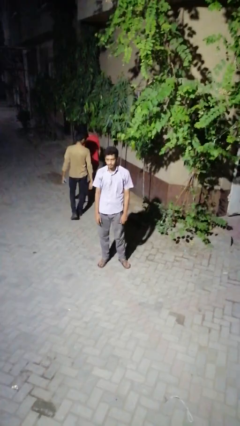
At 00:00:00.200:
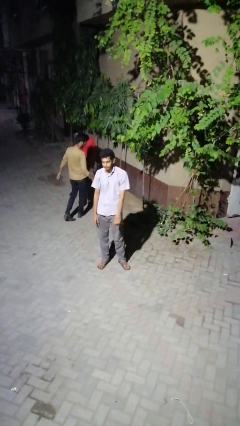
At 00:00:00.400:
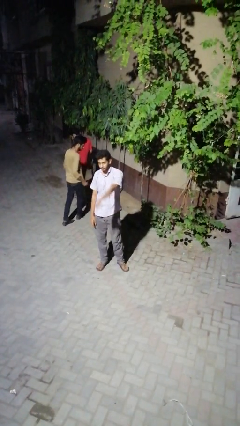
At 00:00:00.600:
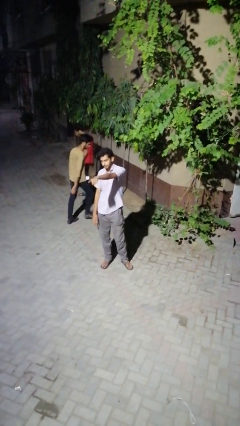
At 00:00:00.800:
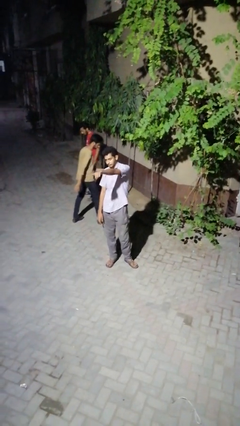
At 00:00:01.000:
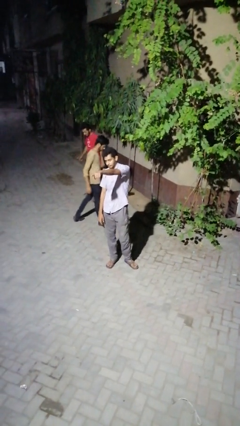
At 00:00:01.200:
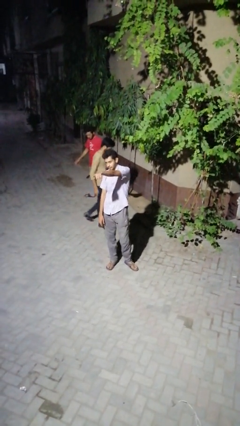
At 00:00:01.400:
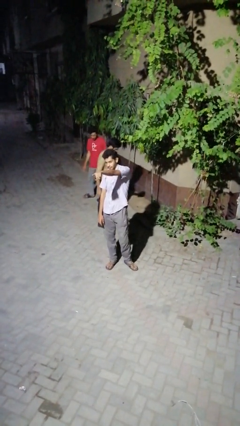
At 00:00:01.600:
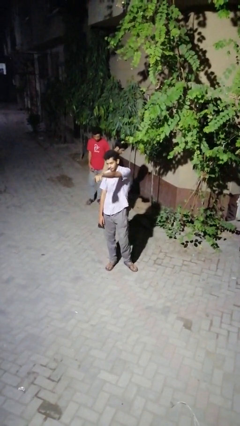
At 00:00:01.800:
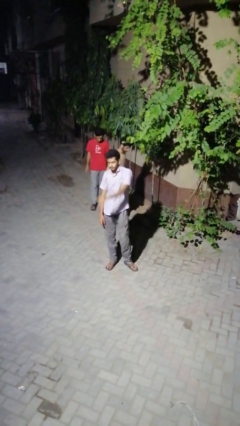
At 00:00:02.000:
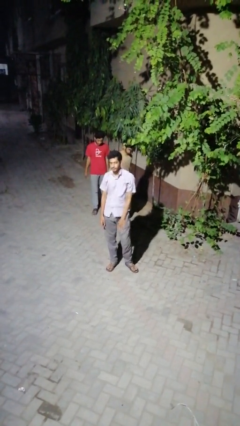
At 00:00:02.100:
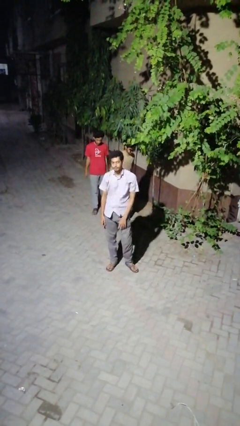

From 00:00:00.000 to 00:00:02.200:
person points at person

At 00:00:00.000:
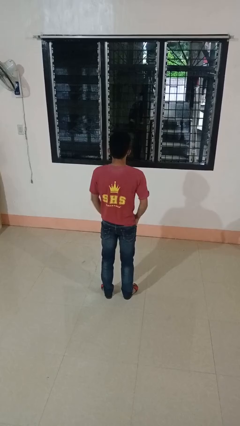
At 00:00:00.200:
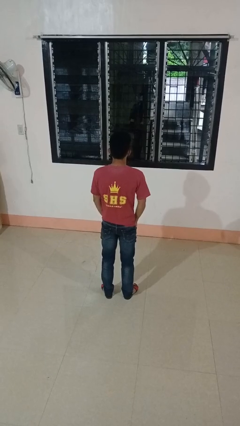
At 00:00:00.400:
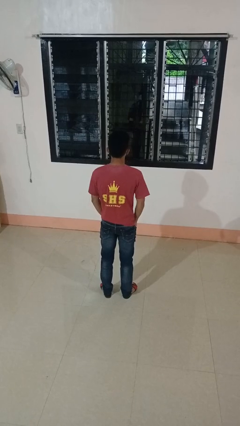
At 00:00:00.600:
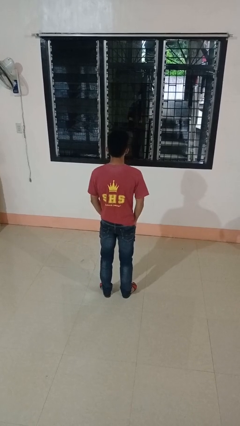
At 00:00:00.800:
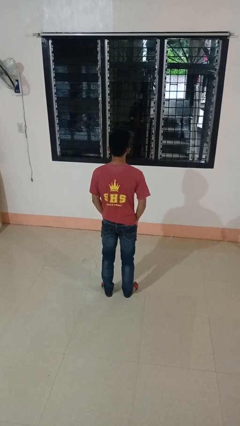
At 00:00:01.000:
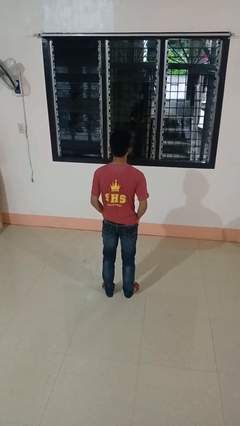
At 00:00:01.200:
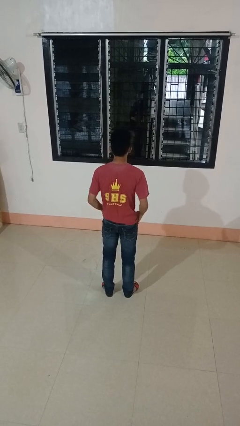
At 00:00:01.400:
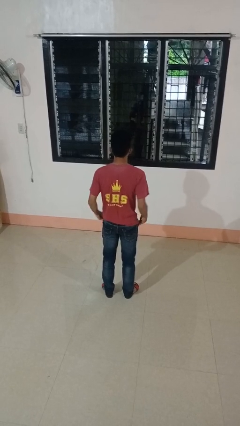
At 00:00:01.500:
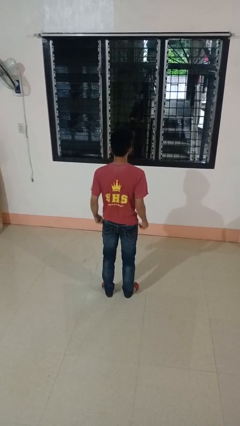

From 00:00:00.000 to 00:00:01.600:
person puts hands in back pockets

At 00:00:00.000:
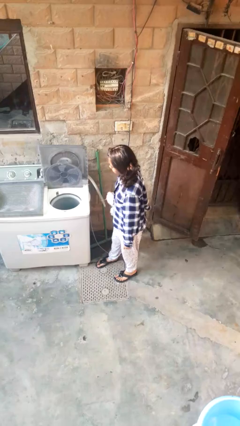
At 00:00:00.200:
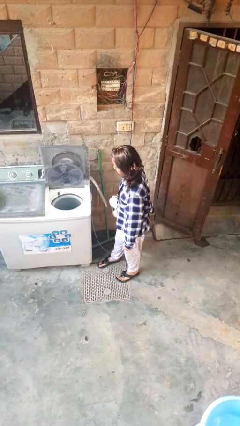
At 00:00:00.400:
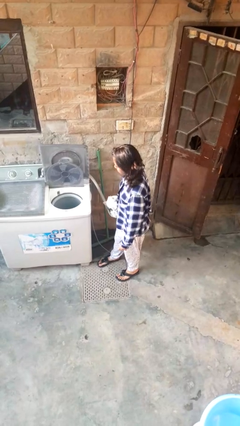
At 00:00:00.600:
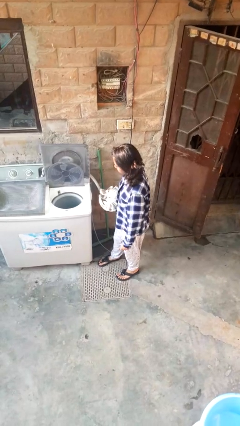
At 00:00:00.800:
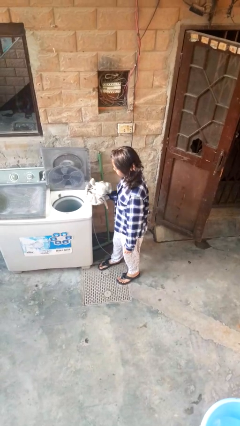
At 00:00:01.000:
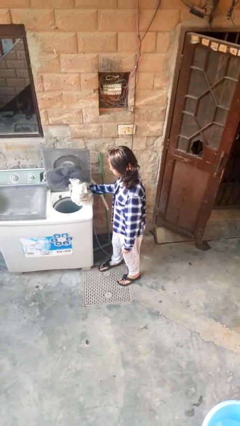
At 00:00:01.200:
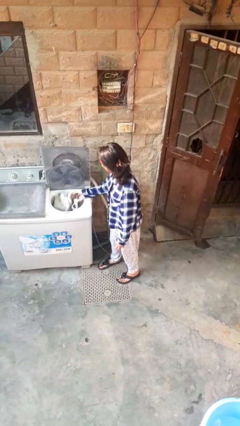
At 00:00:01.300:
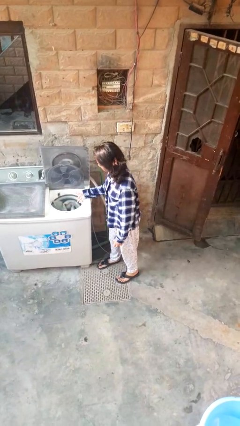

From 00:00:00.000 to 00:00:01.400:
person loads dryer

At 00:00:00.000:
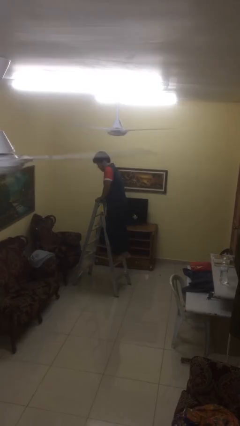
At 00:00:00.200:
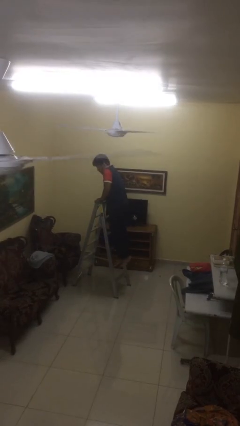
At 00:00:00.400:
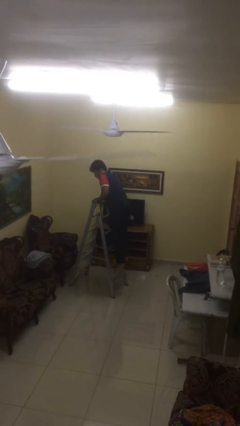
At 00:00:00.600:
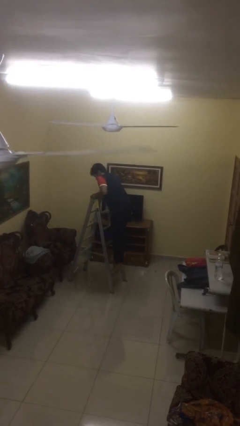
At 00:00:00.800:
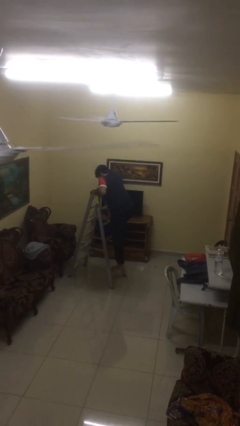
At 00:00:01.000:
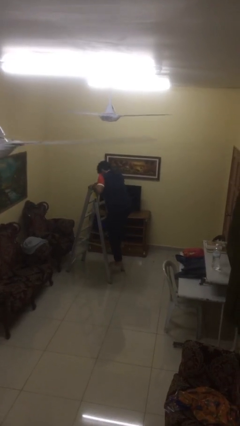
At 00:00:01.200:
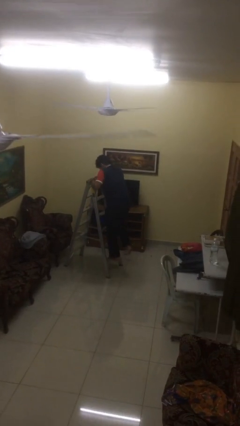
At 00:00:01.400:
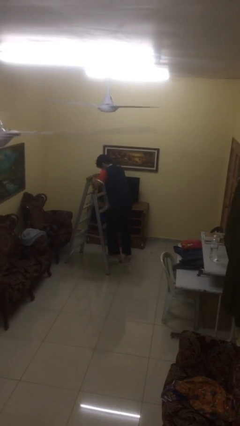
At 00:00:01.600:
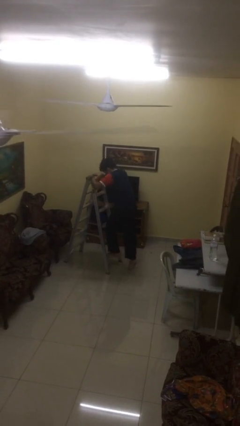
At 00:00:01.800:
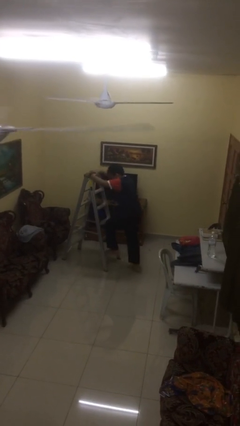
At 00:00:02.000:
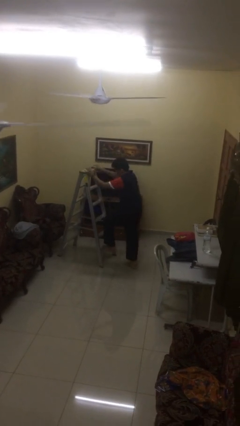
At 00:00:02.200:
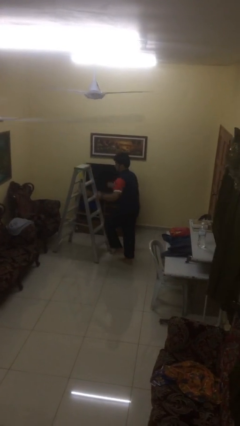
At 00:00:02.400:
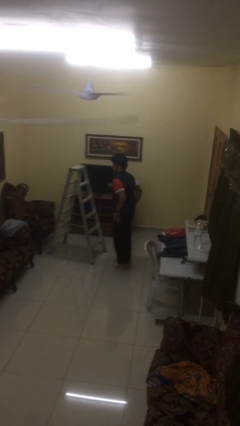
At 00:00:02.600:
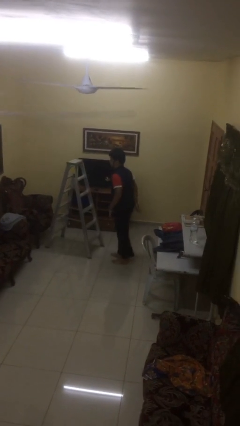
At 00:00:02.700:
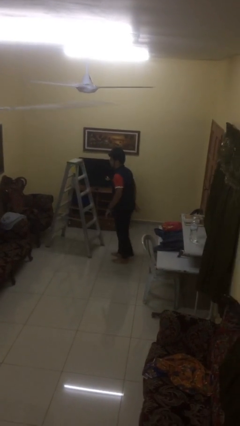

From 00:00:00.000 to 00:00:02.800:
person climbs down ladder

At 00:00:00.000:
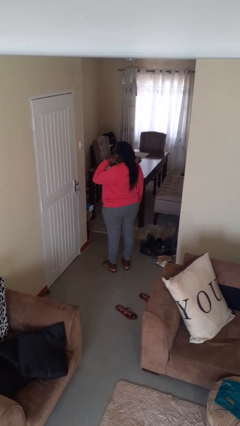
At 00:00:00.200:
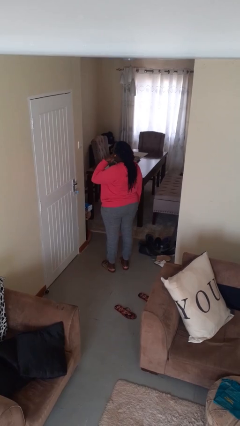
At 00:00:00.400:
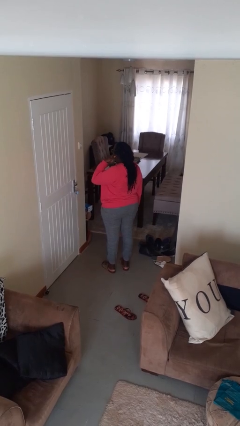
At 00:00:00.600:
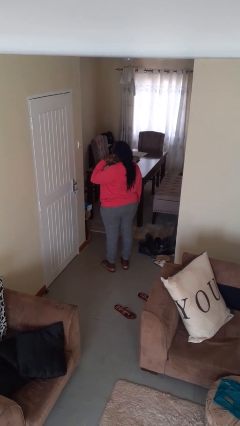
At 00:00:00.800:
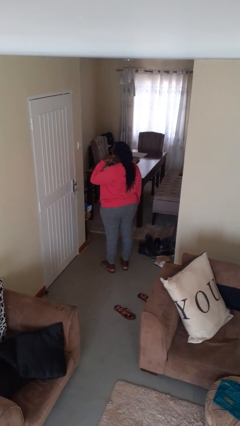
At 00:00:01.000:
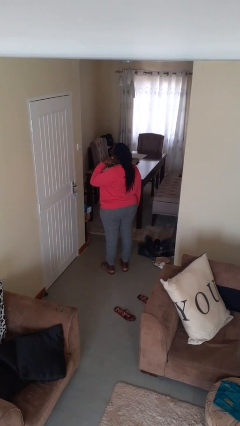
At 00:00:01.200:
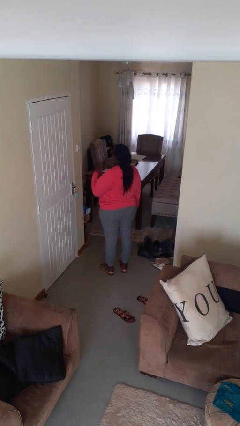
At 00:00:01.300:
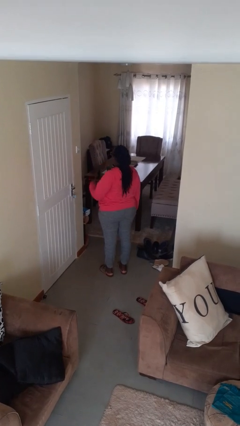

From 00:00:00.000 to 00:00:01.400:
person gestures call me

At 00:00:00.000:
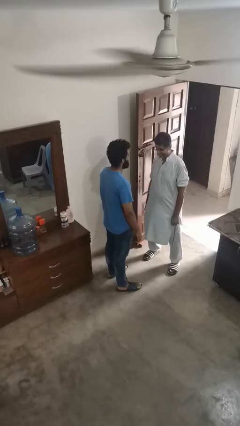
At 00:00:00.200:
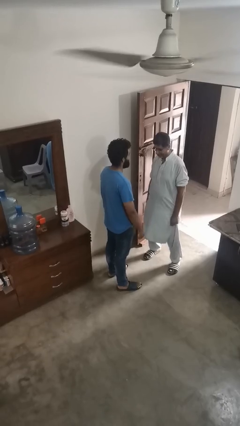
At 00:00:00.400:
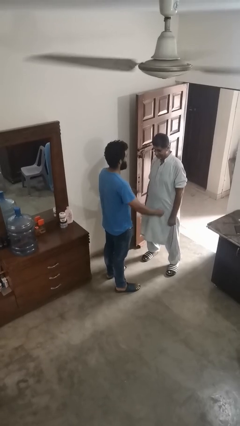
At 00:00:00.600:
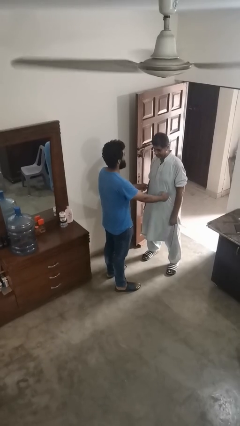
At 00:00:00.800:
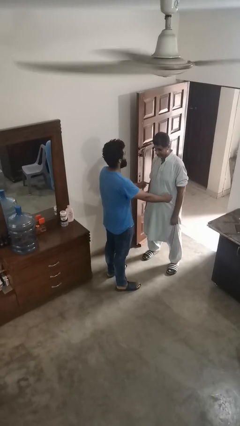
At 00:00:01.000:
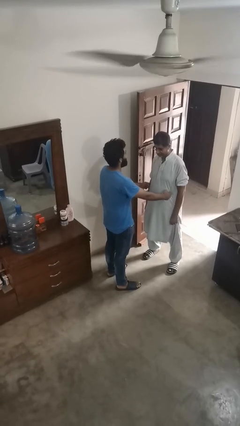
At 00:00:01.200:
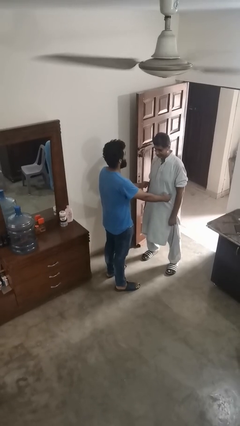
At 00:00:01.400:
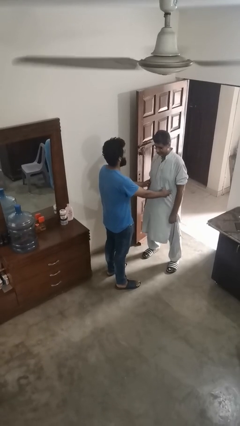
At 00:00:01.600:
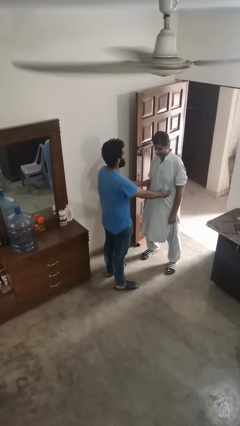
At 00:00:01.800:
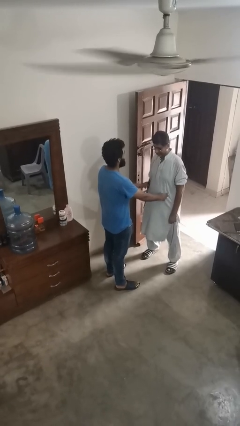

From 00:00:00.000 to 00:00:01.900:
person tickles person

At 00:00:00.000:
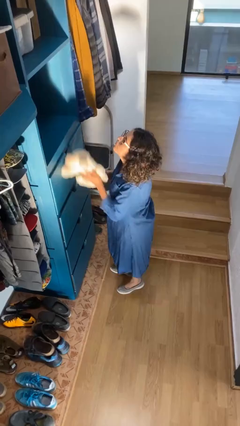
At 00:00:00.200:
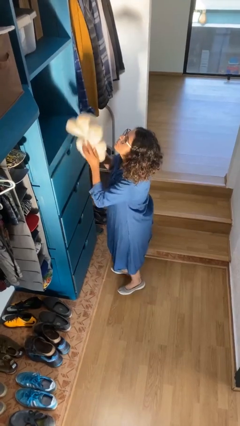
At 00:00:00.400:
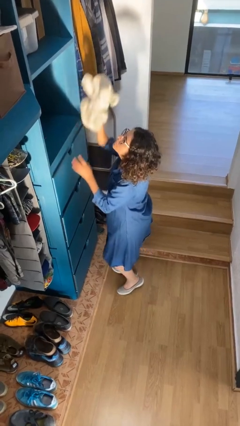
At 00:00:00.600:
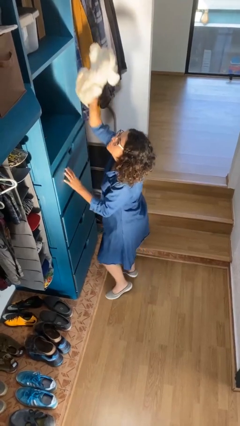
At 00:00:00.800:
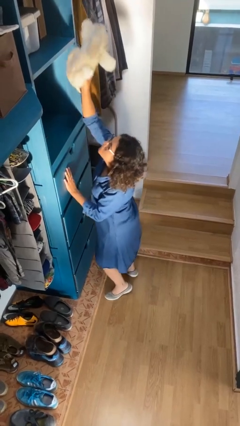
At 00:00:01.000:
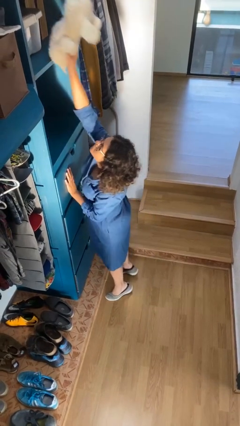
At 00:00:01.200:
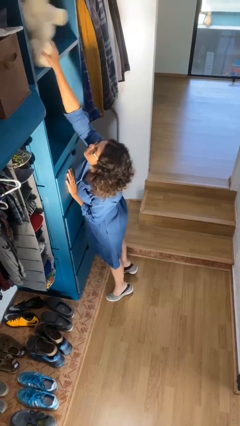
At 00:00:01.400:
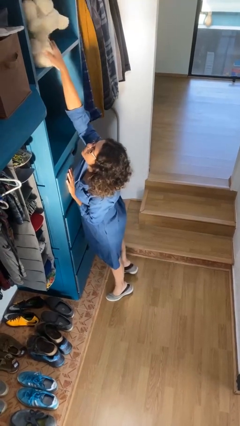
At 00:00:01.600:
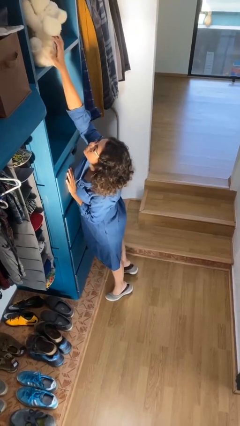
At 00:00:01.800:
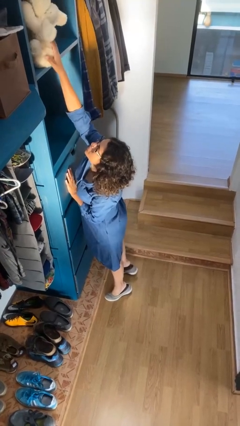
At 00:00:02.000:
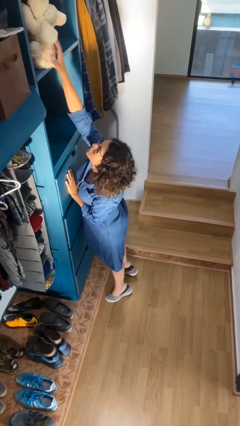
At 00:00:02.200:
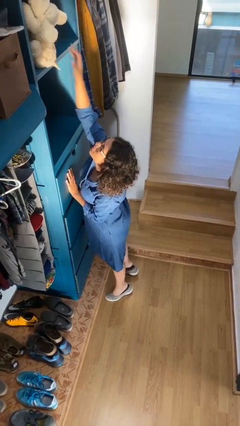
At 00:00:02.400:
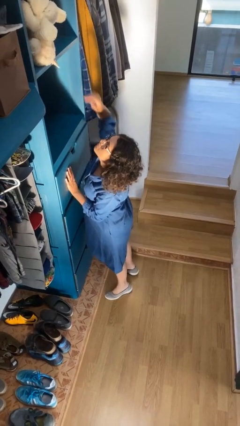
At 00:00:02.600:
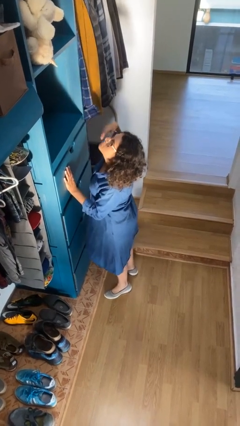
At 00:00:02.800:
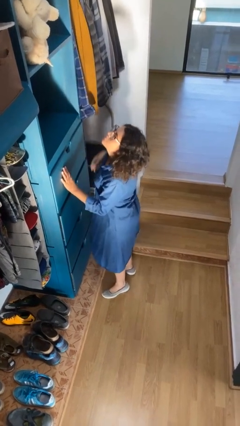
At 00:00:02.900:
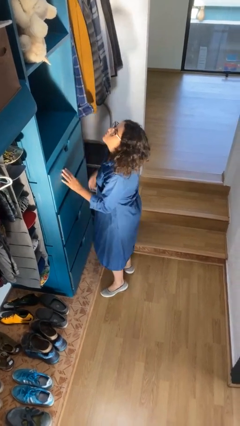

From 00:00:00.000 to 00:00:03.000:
person puts down object on shelf

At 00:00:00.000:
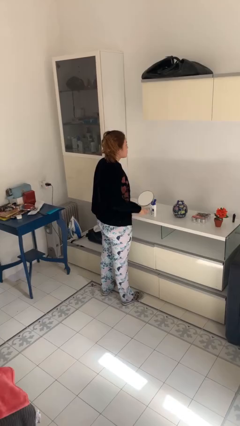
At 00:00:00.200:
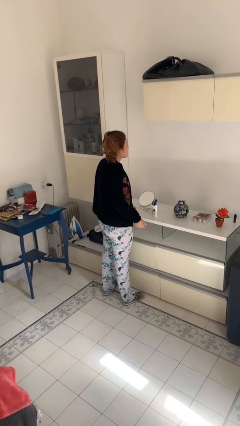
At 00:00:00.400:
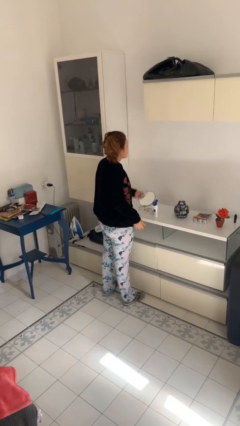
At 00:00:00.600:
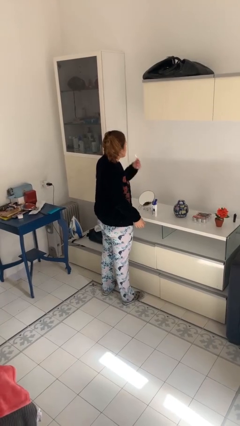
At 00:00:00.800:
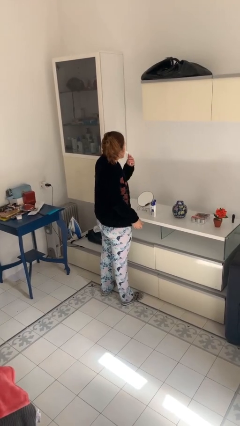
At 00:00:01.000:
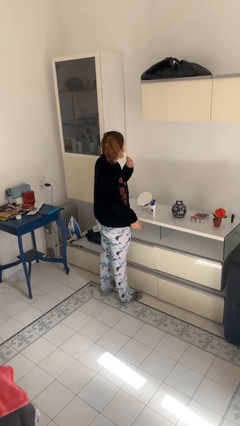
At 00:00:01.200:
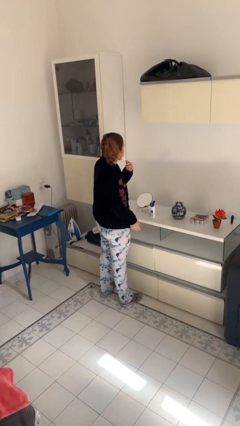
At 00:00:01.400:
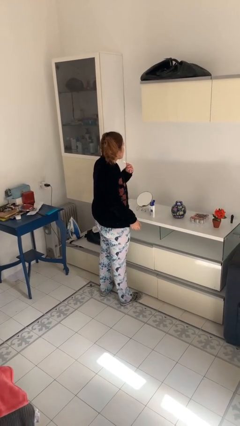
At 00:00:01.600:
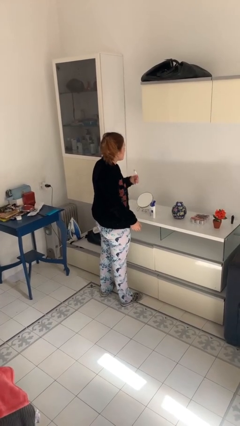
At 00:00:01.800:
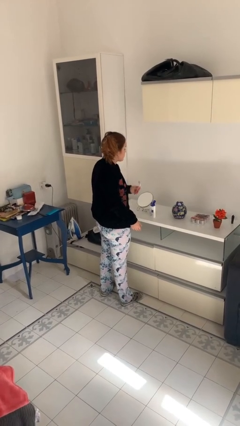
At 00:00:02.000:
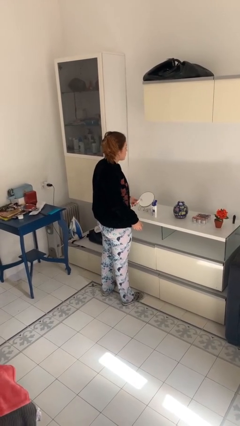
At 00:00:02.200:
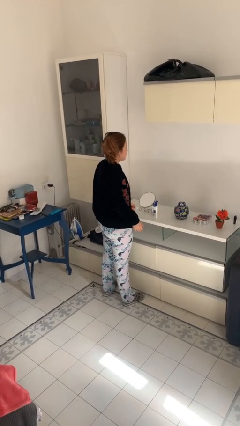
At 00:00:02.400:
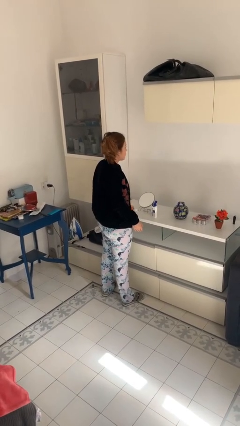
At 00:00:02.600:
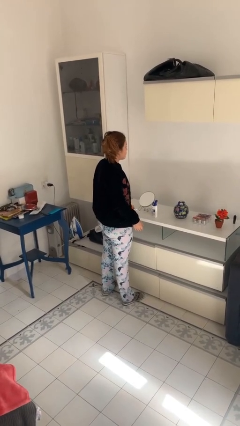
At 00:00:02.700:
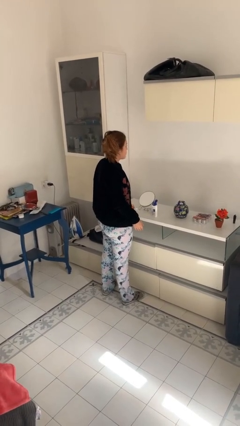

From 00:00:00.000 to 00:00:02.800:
person shaves face
